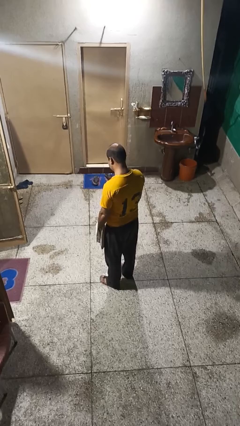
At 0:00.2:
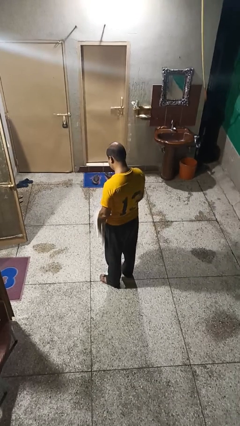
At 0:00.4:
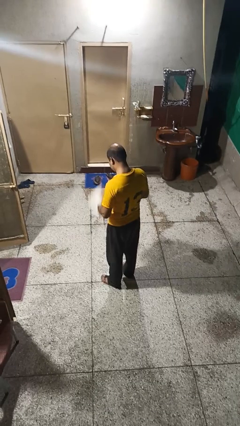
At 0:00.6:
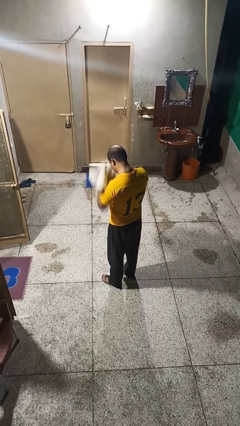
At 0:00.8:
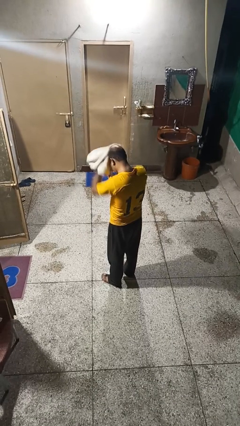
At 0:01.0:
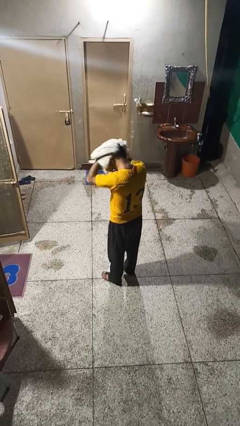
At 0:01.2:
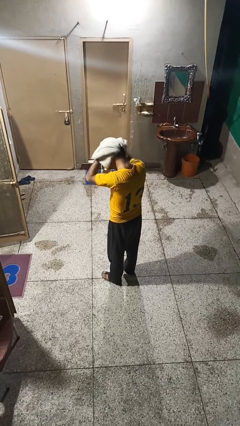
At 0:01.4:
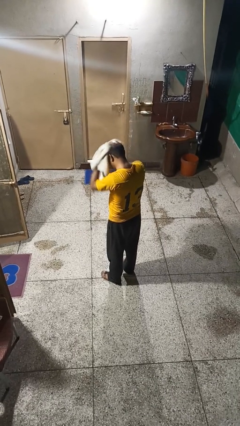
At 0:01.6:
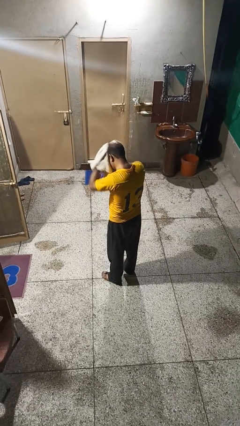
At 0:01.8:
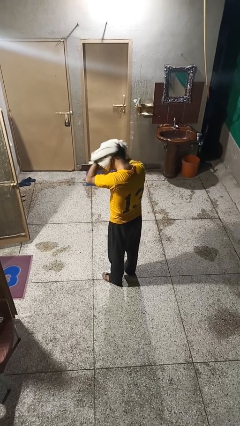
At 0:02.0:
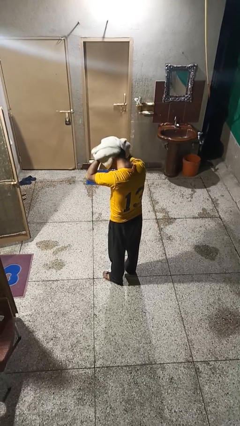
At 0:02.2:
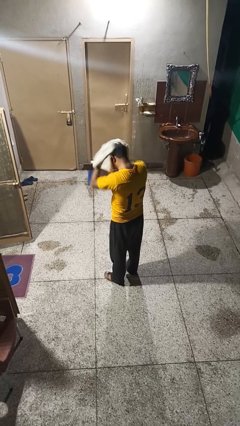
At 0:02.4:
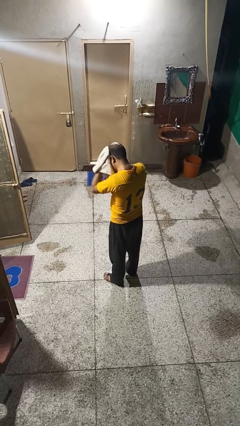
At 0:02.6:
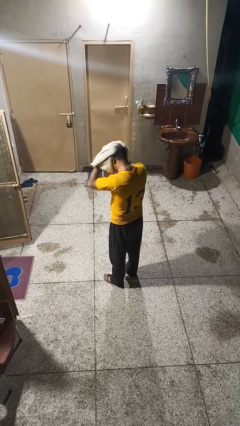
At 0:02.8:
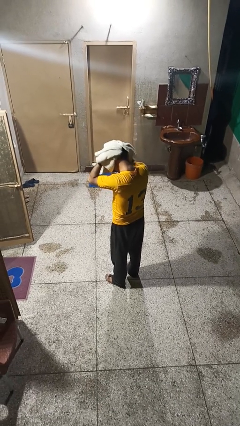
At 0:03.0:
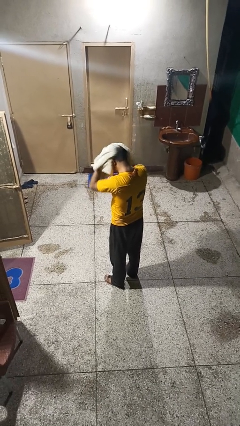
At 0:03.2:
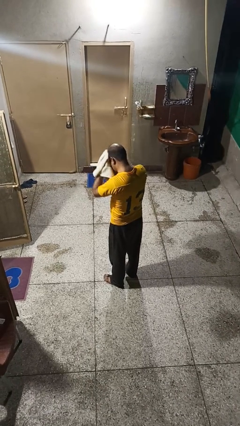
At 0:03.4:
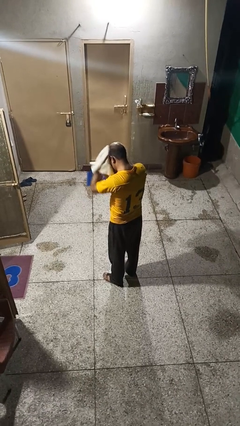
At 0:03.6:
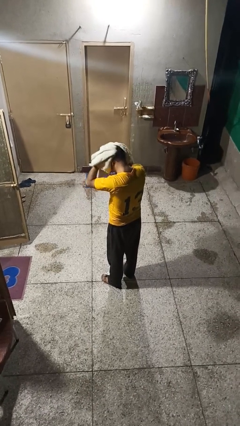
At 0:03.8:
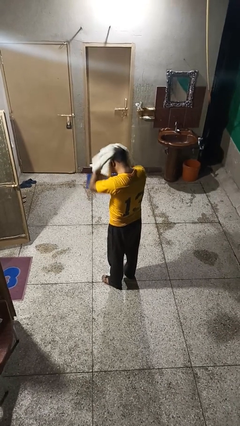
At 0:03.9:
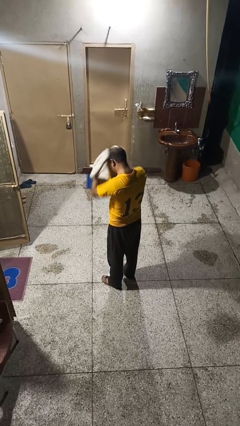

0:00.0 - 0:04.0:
person dries hair with towel

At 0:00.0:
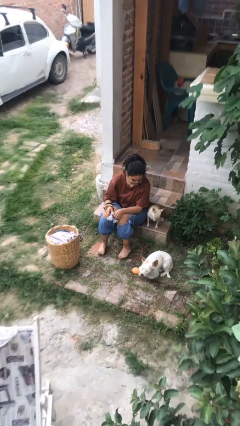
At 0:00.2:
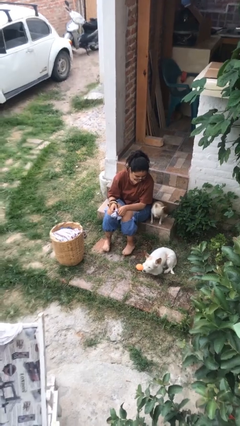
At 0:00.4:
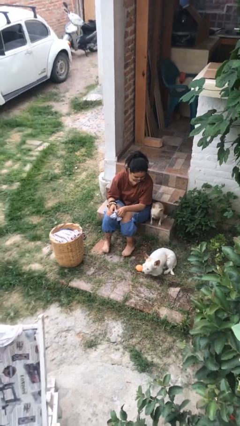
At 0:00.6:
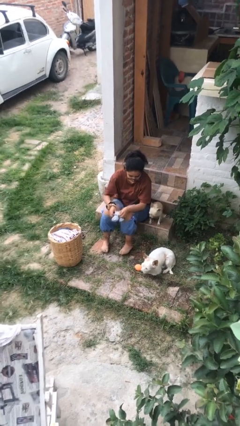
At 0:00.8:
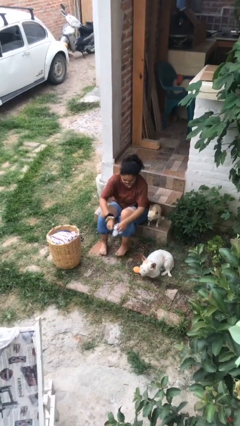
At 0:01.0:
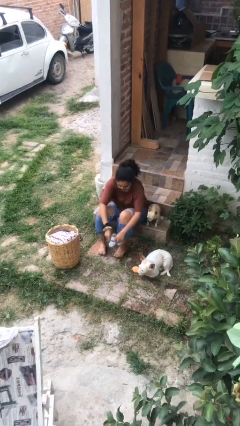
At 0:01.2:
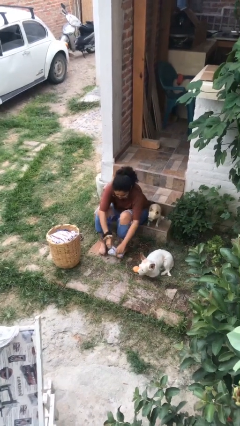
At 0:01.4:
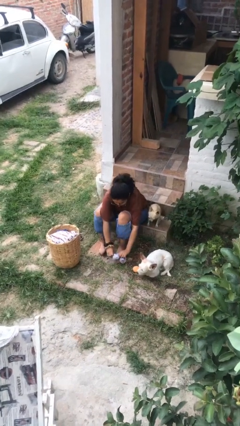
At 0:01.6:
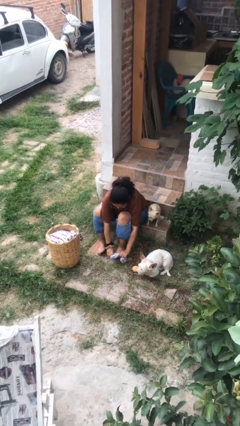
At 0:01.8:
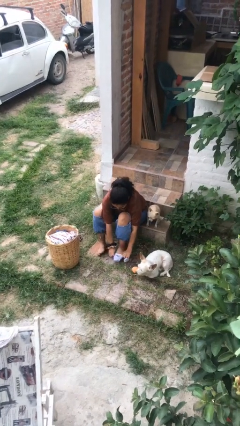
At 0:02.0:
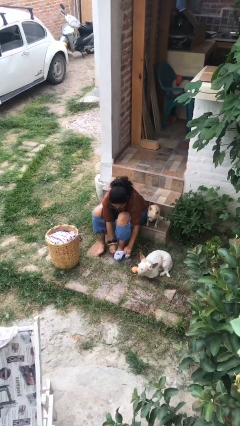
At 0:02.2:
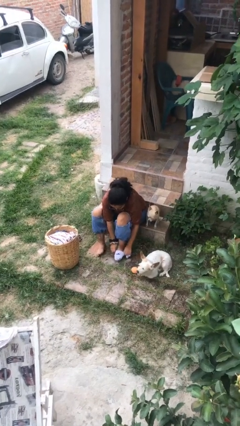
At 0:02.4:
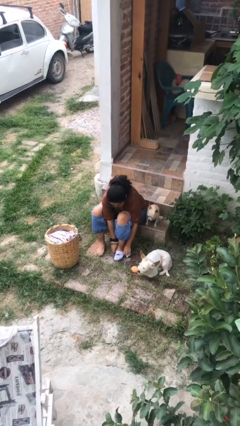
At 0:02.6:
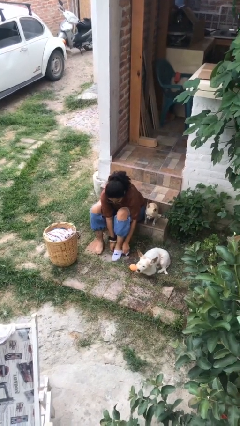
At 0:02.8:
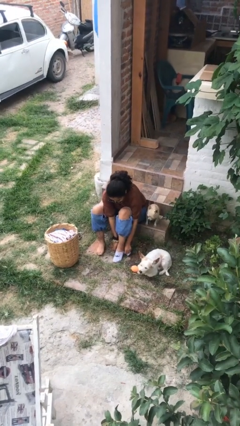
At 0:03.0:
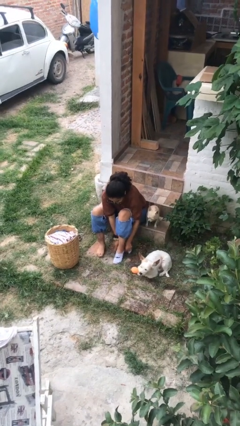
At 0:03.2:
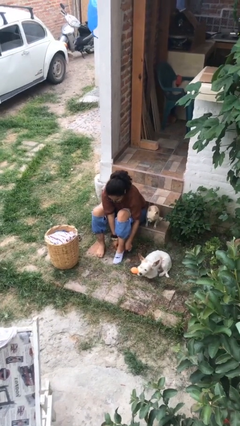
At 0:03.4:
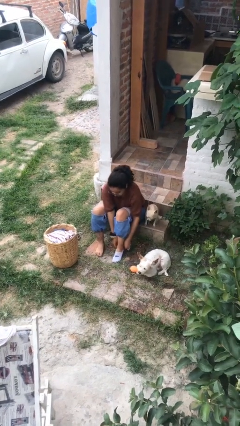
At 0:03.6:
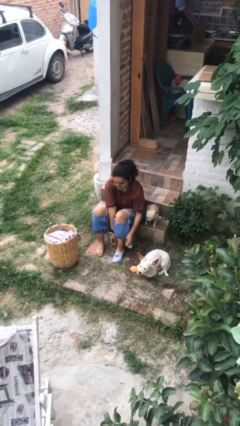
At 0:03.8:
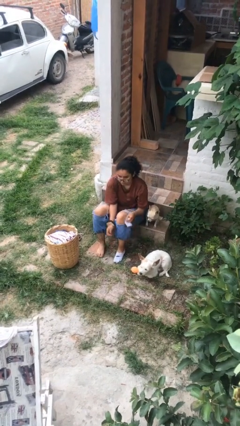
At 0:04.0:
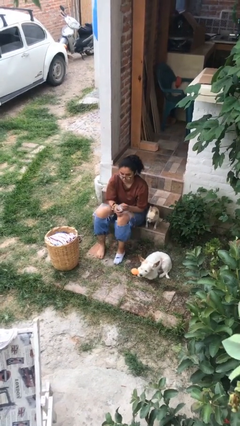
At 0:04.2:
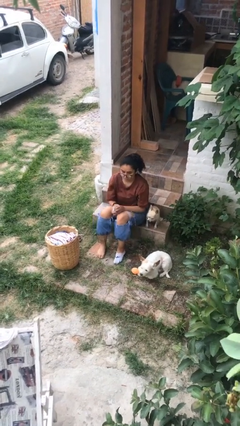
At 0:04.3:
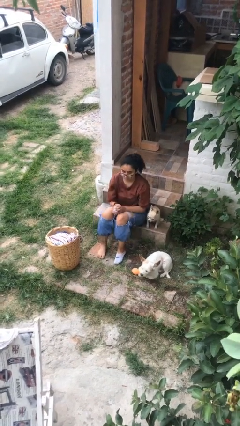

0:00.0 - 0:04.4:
person puts on socks

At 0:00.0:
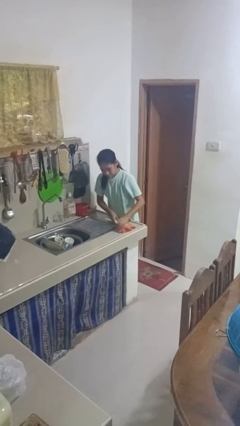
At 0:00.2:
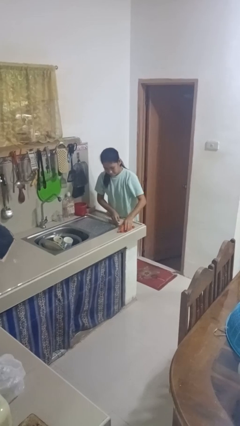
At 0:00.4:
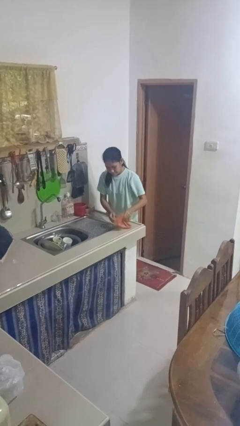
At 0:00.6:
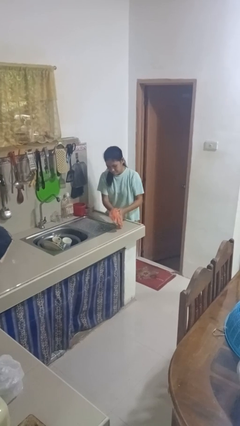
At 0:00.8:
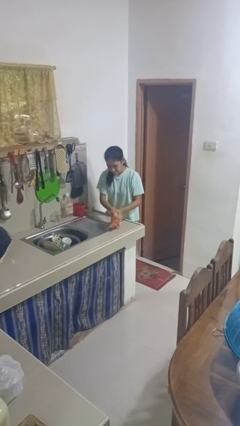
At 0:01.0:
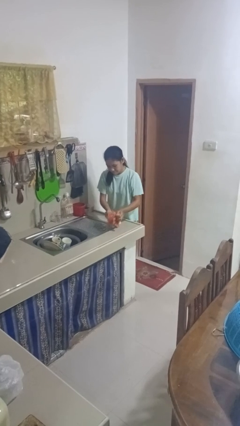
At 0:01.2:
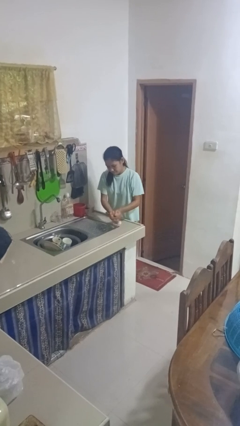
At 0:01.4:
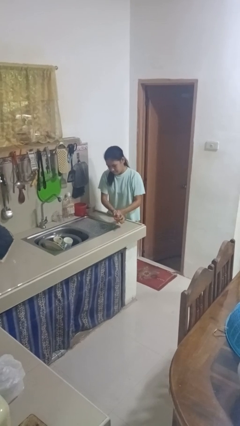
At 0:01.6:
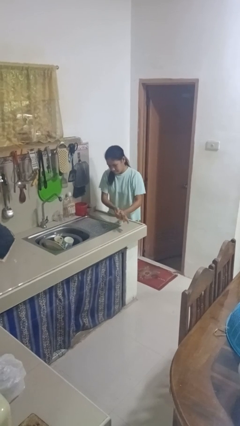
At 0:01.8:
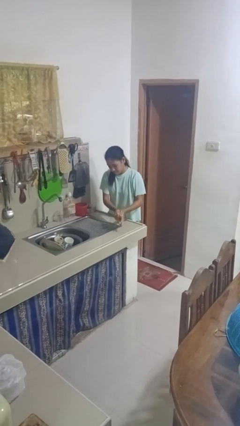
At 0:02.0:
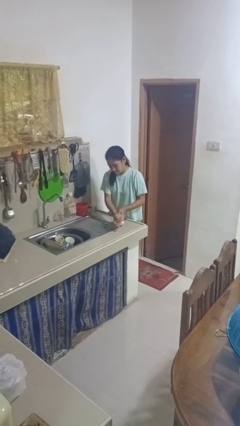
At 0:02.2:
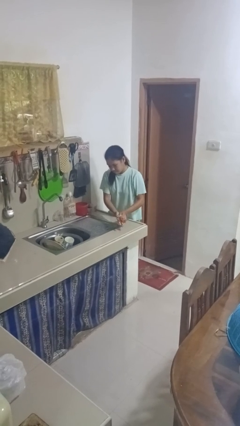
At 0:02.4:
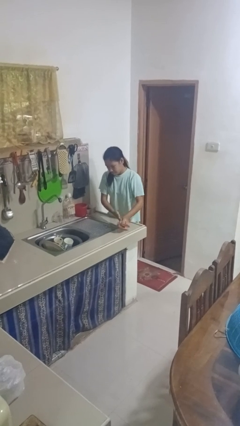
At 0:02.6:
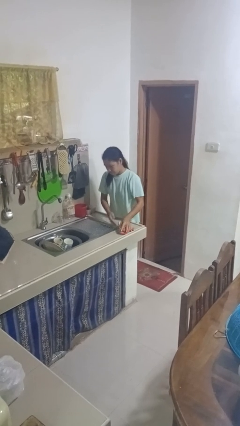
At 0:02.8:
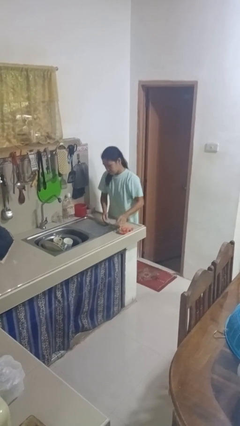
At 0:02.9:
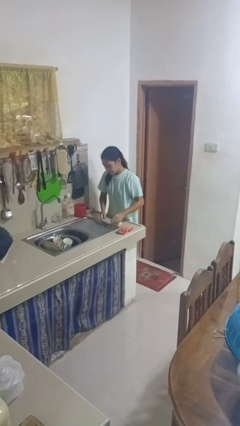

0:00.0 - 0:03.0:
person dries hands with towel

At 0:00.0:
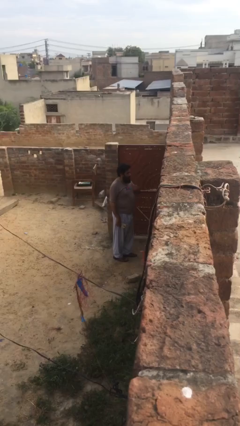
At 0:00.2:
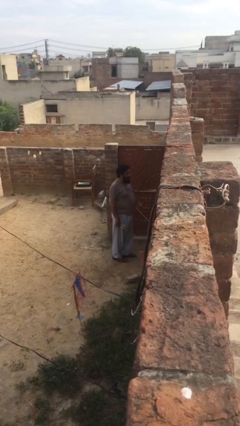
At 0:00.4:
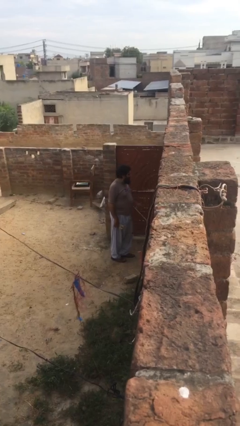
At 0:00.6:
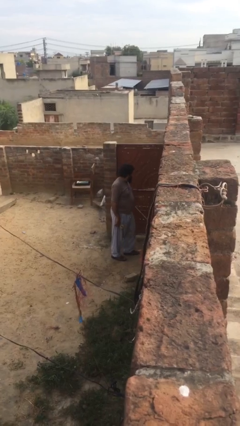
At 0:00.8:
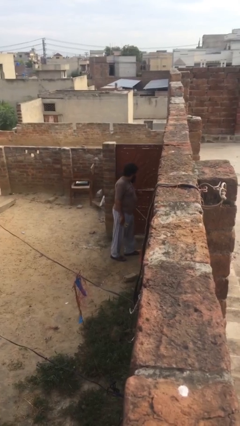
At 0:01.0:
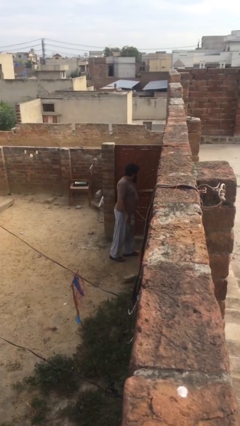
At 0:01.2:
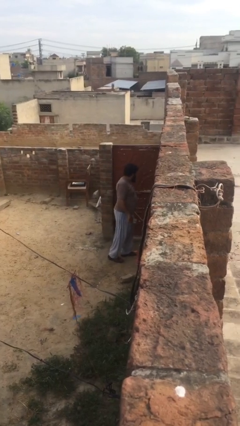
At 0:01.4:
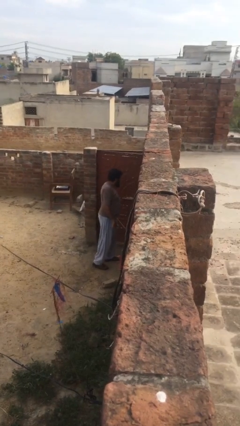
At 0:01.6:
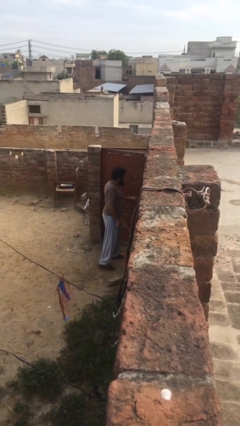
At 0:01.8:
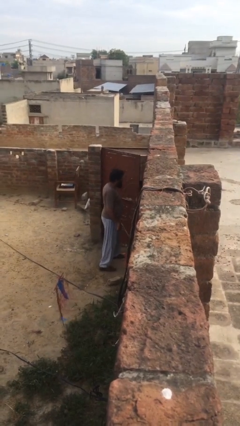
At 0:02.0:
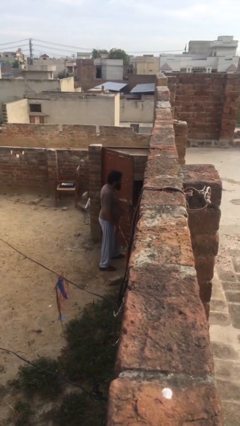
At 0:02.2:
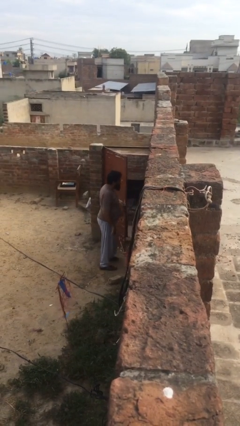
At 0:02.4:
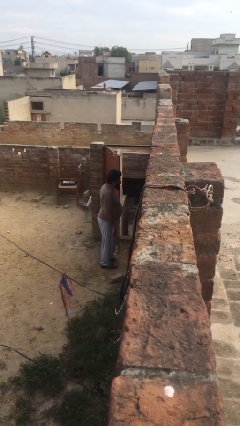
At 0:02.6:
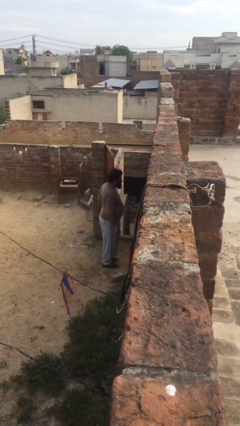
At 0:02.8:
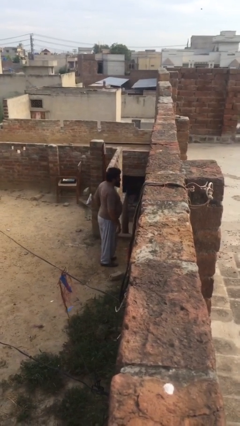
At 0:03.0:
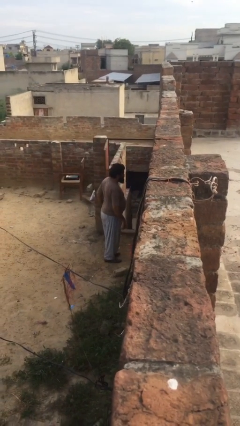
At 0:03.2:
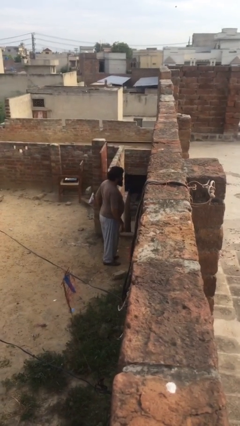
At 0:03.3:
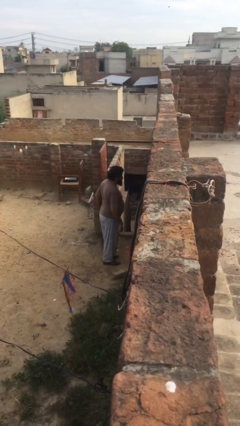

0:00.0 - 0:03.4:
person opens facility door

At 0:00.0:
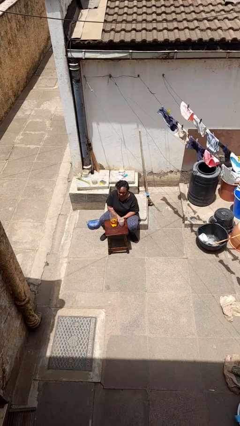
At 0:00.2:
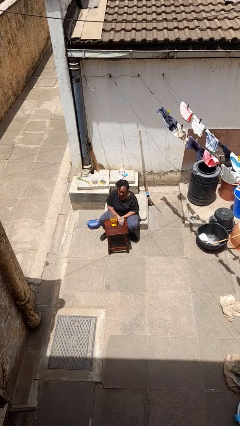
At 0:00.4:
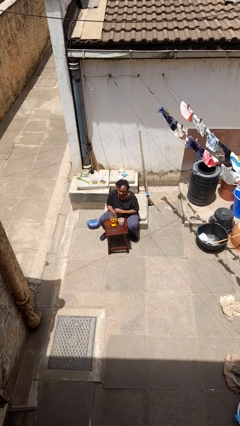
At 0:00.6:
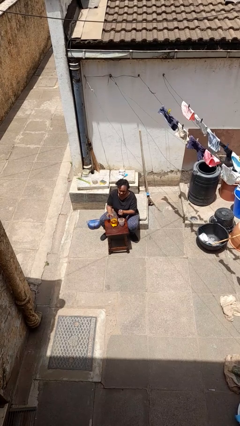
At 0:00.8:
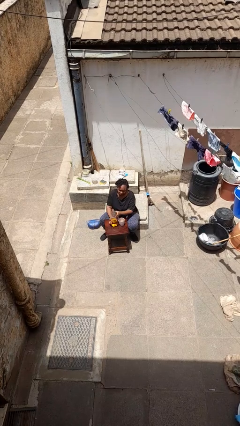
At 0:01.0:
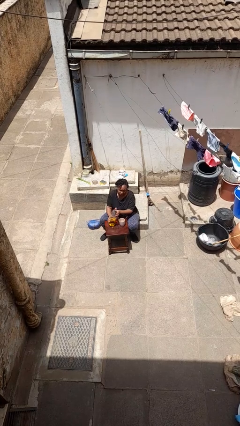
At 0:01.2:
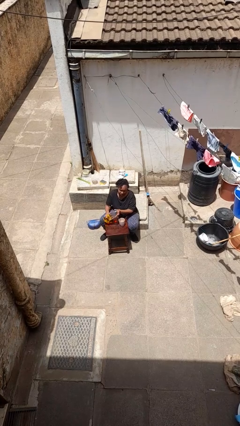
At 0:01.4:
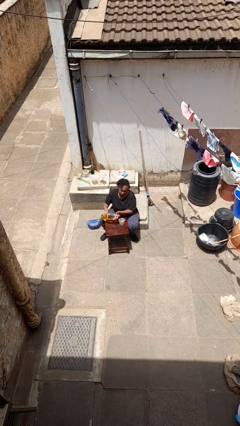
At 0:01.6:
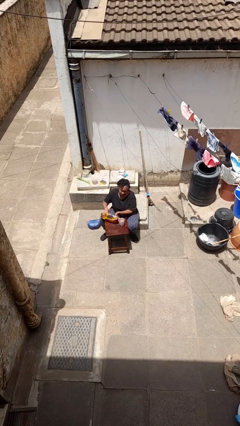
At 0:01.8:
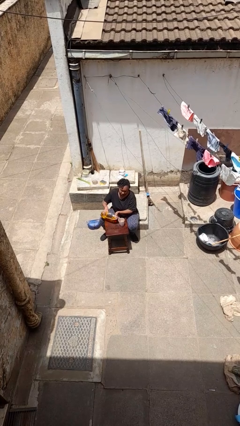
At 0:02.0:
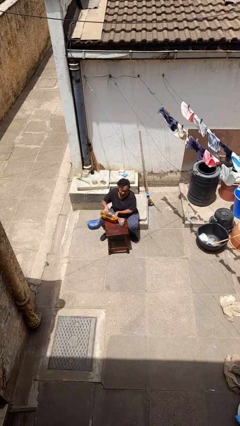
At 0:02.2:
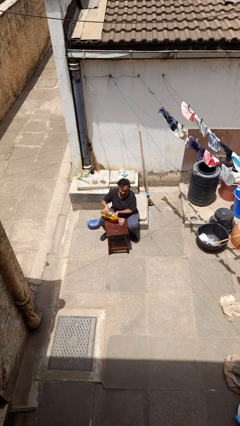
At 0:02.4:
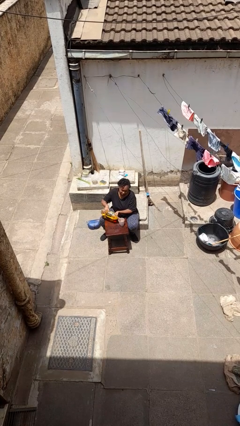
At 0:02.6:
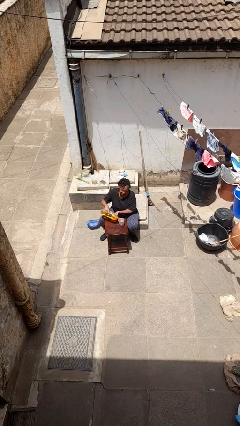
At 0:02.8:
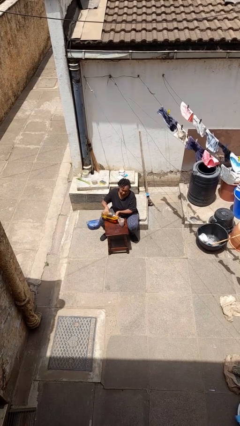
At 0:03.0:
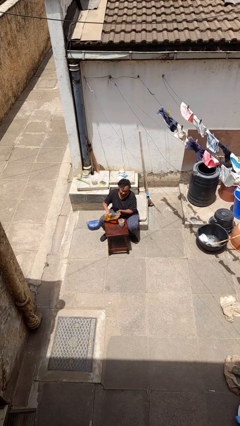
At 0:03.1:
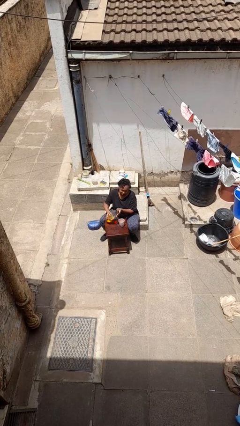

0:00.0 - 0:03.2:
person pours liquid into cup
